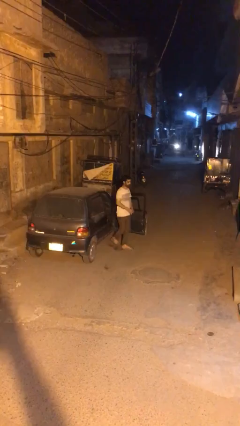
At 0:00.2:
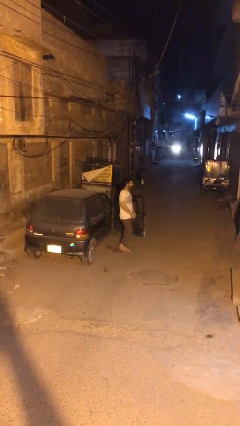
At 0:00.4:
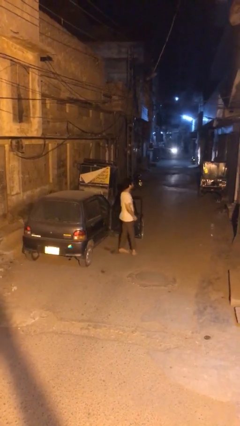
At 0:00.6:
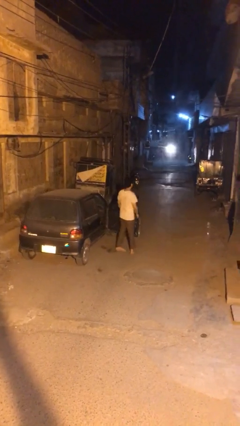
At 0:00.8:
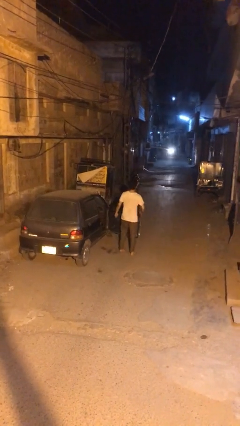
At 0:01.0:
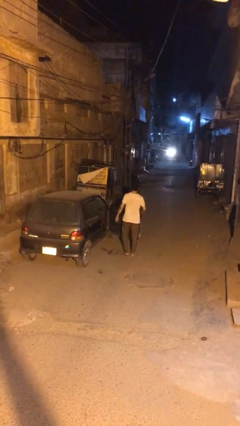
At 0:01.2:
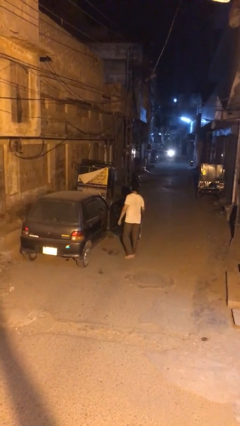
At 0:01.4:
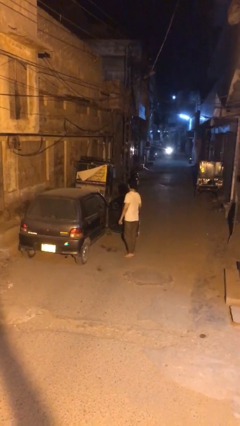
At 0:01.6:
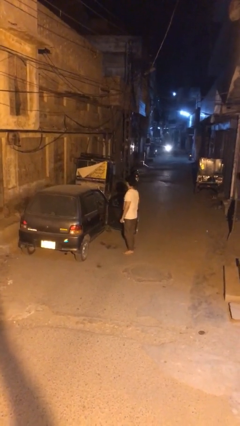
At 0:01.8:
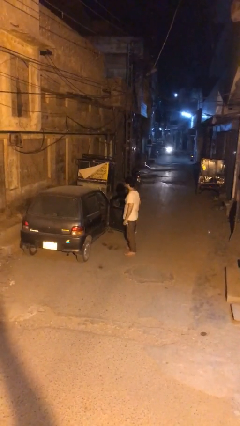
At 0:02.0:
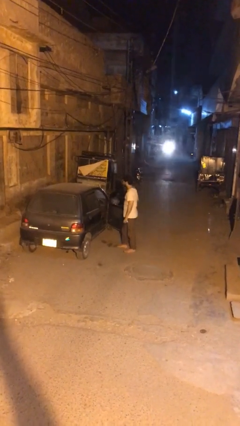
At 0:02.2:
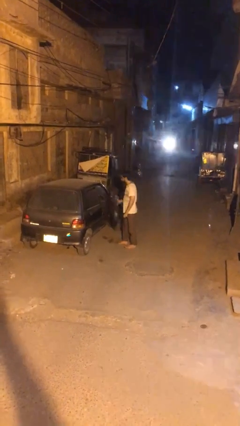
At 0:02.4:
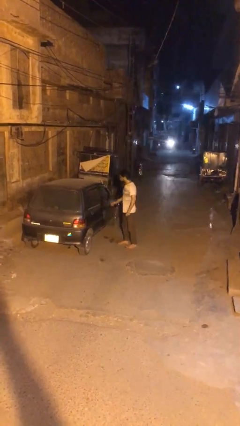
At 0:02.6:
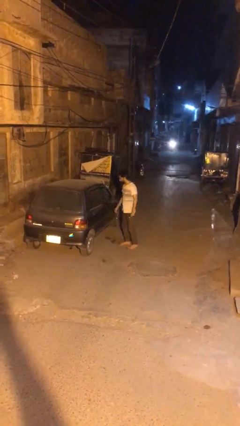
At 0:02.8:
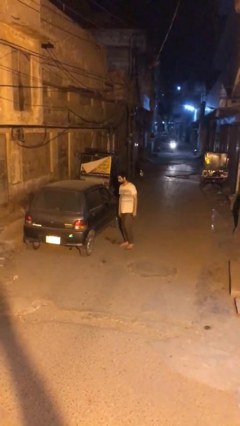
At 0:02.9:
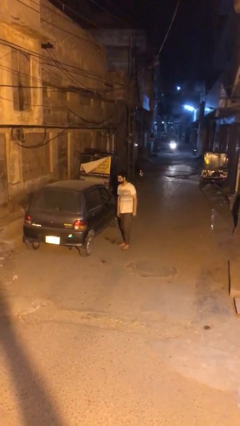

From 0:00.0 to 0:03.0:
person closes car door

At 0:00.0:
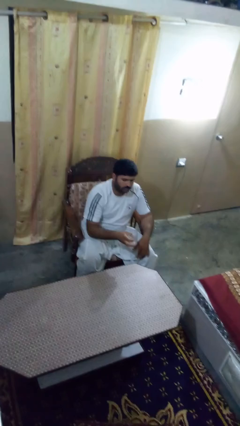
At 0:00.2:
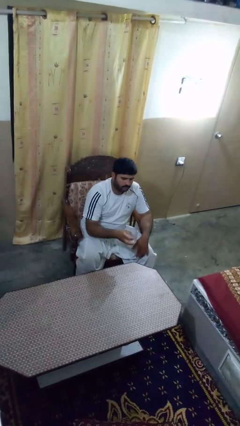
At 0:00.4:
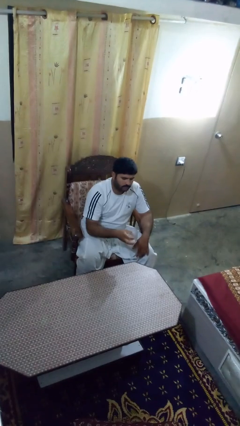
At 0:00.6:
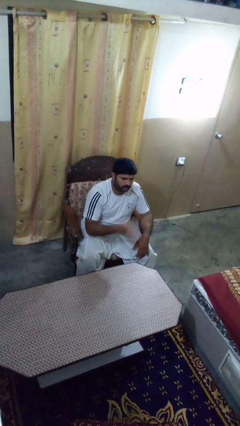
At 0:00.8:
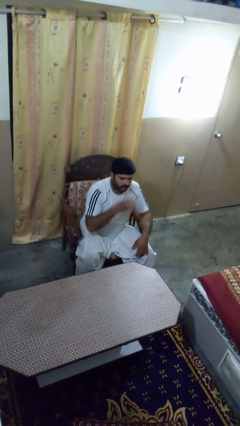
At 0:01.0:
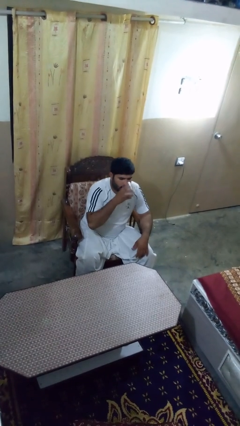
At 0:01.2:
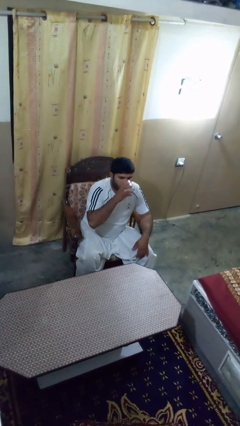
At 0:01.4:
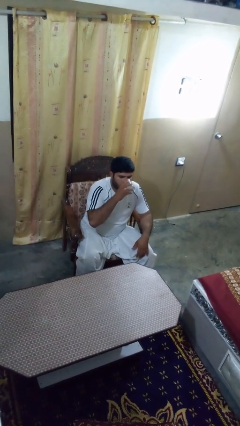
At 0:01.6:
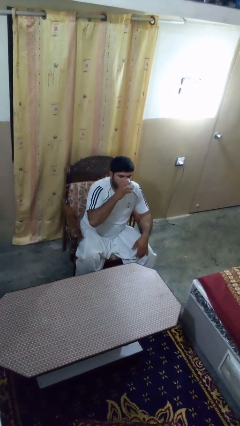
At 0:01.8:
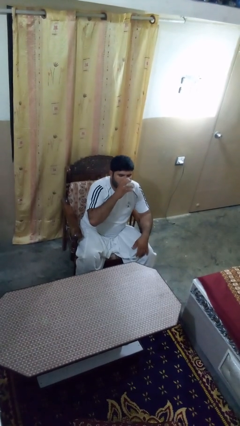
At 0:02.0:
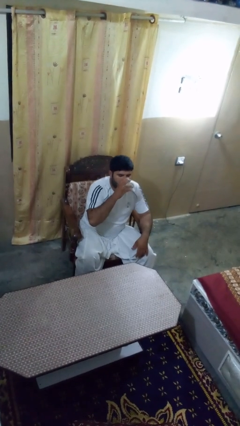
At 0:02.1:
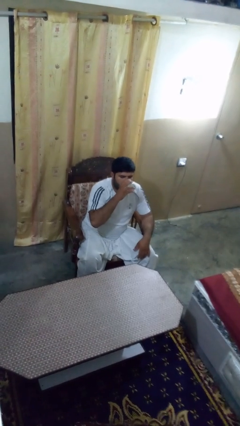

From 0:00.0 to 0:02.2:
person drinks from shotglass

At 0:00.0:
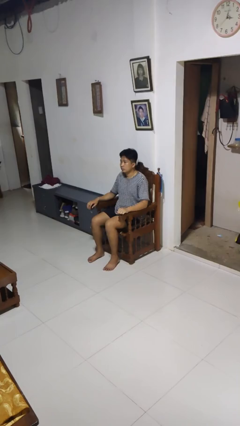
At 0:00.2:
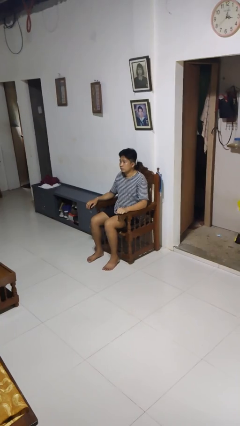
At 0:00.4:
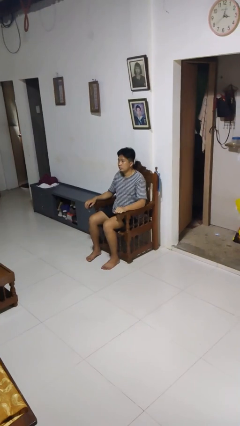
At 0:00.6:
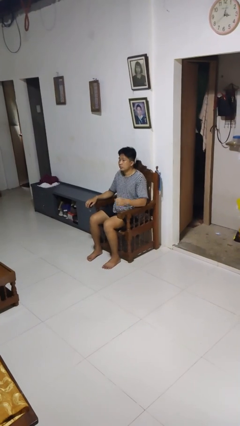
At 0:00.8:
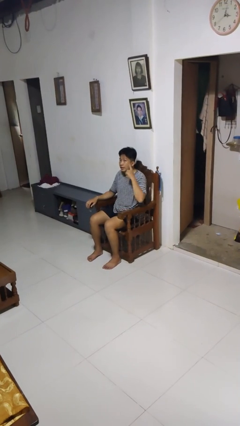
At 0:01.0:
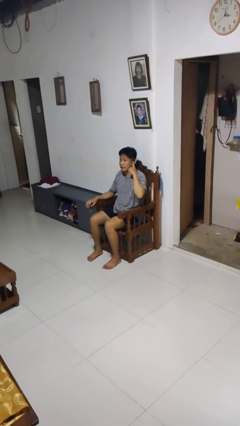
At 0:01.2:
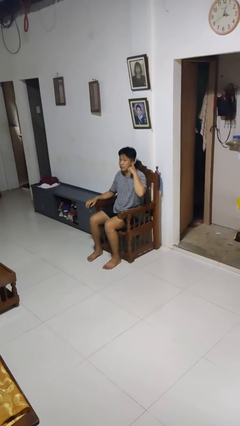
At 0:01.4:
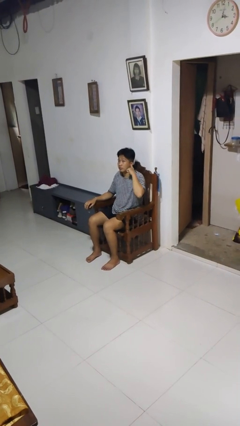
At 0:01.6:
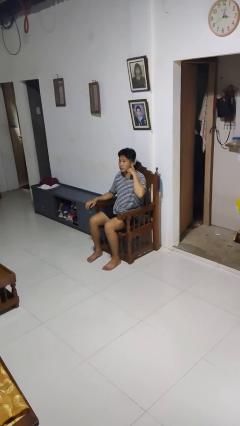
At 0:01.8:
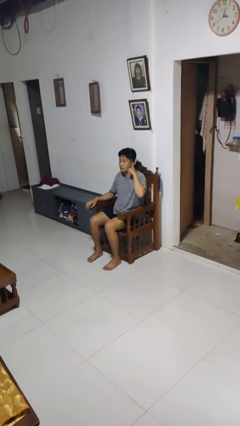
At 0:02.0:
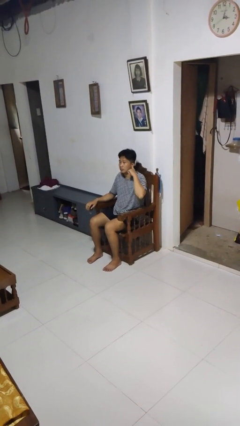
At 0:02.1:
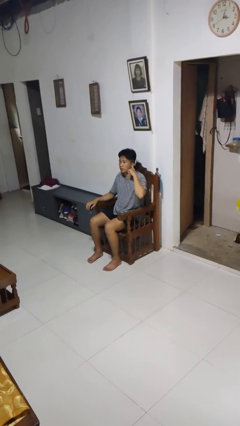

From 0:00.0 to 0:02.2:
person gestures listen closely

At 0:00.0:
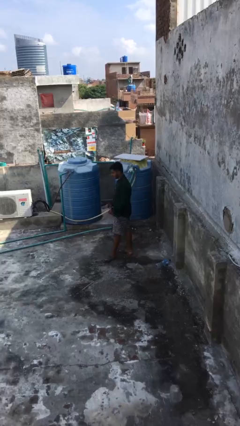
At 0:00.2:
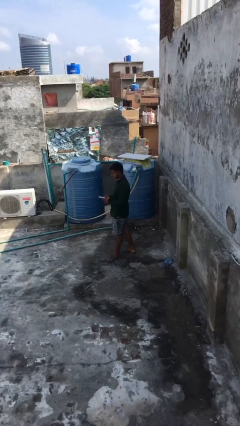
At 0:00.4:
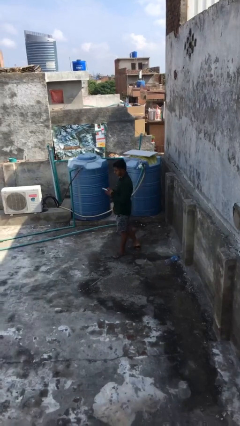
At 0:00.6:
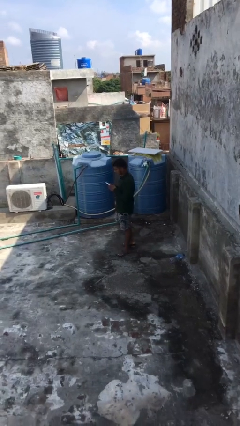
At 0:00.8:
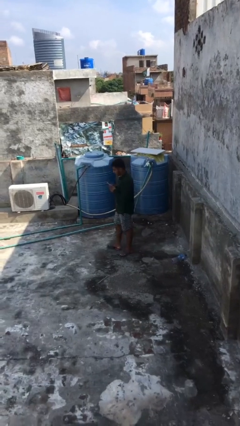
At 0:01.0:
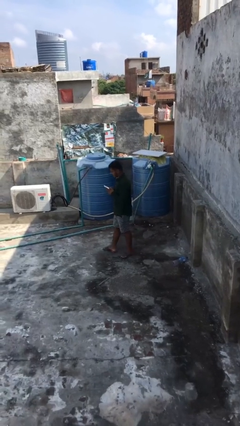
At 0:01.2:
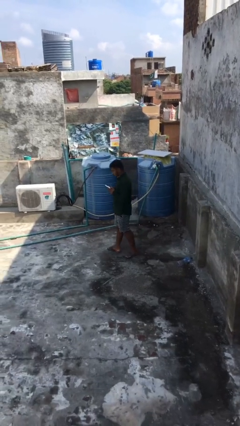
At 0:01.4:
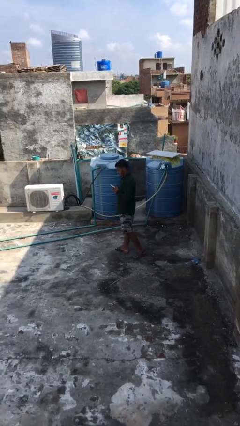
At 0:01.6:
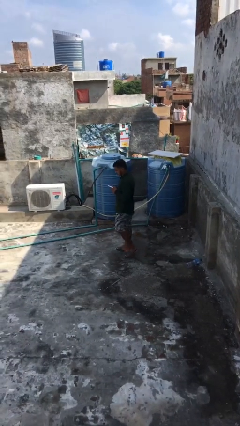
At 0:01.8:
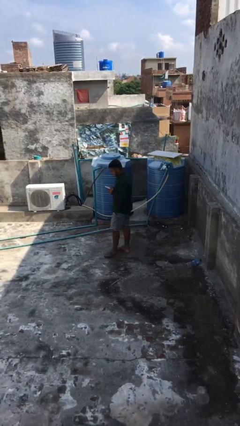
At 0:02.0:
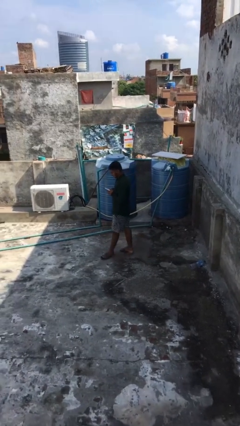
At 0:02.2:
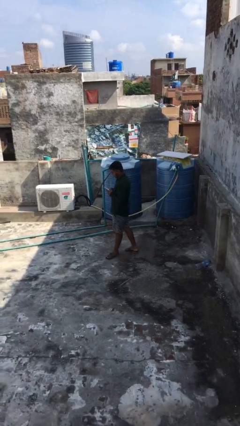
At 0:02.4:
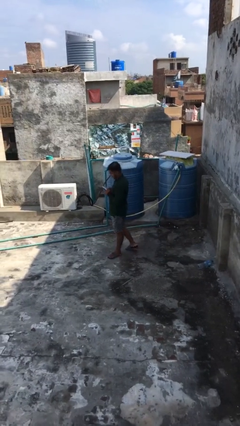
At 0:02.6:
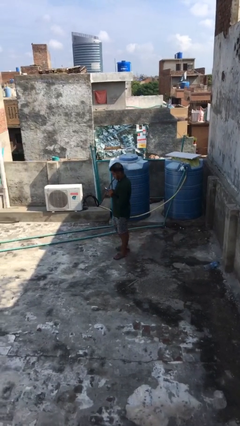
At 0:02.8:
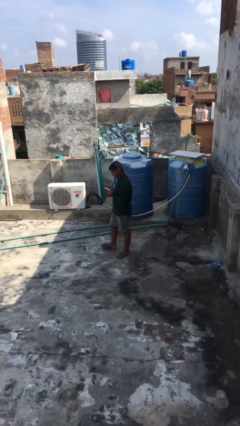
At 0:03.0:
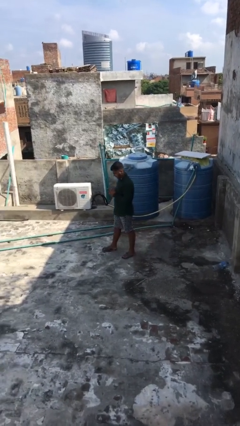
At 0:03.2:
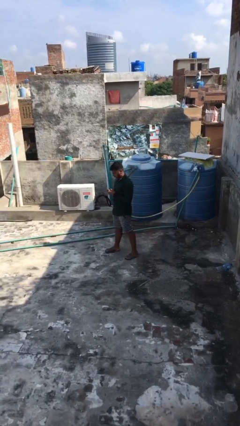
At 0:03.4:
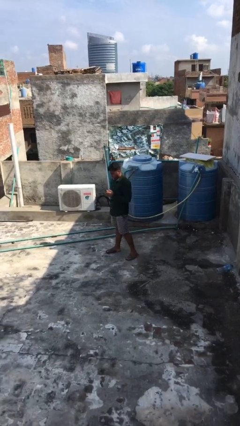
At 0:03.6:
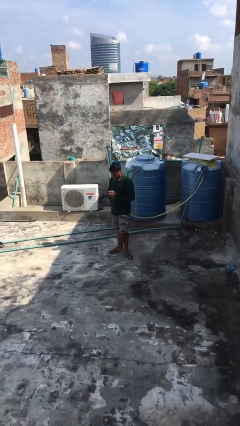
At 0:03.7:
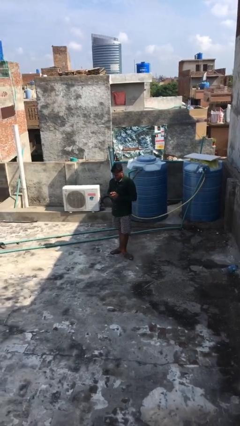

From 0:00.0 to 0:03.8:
person texts on phone

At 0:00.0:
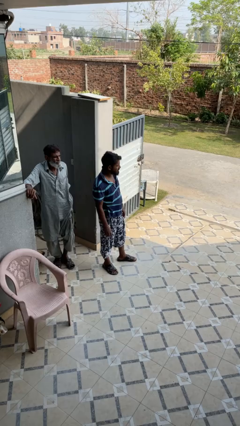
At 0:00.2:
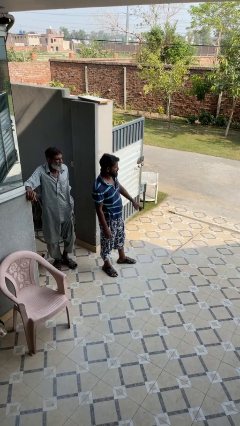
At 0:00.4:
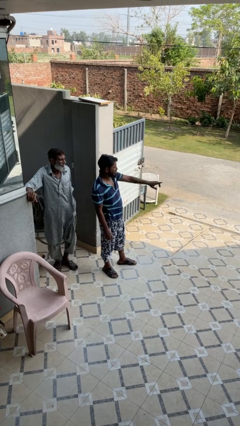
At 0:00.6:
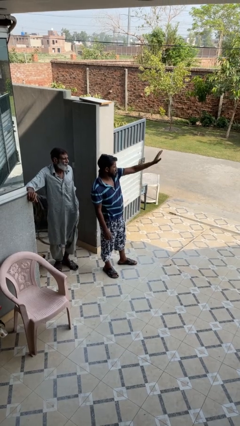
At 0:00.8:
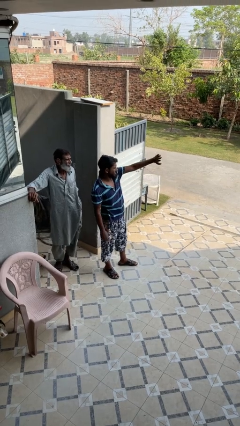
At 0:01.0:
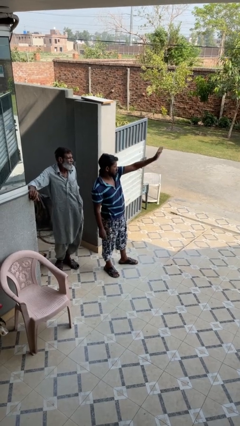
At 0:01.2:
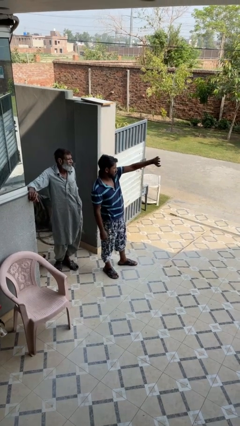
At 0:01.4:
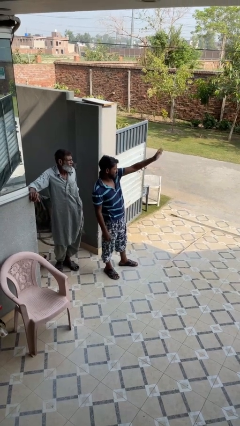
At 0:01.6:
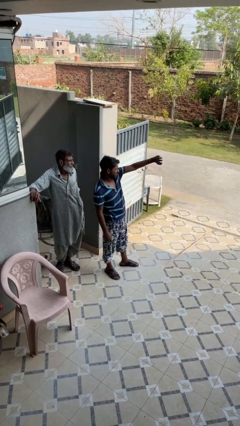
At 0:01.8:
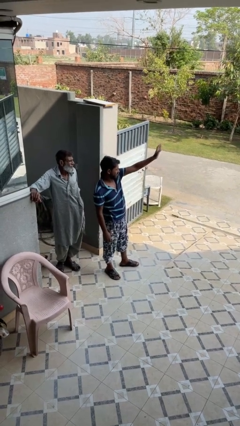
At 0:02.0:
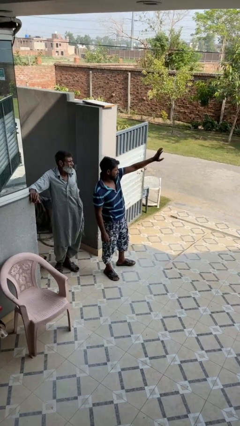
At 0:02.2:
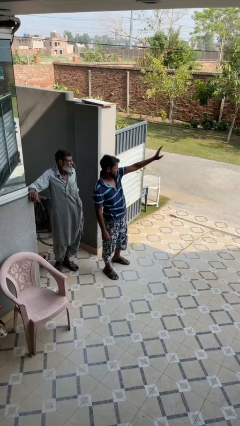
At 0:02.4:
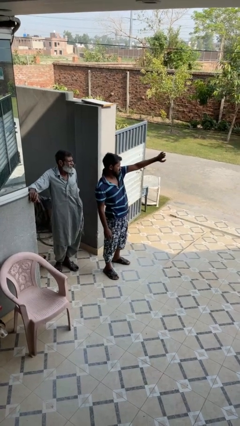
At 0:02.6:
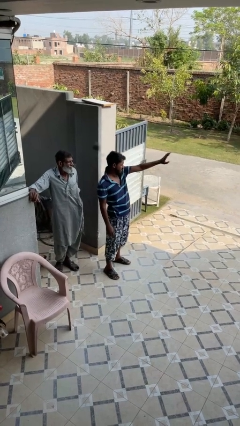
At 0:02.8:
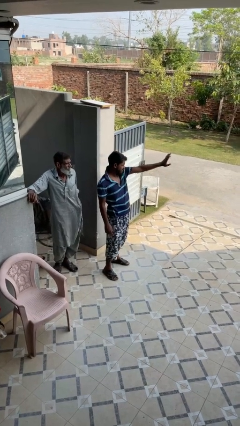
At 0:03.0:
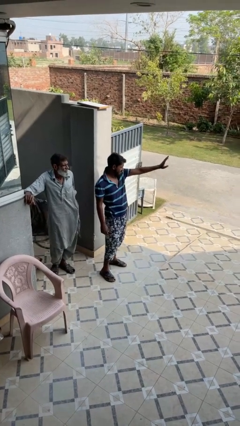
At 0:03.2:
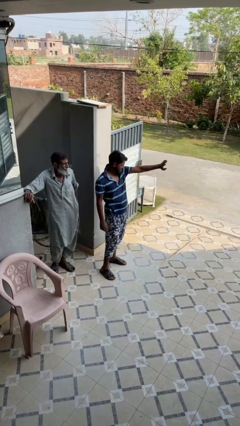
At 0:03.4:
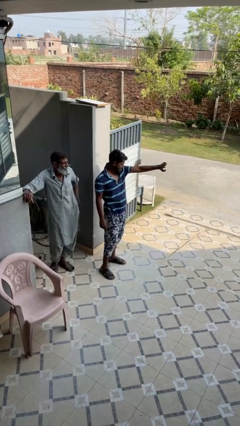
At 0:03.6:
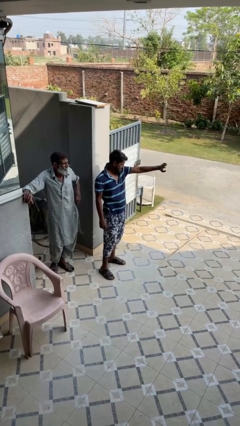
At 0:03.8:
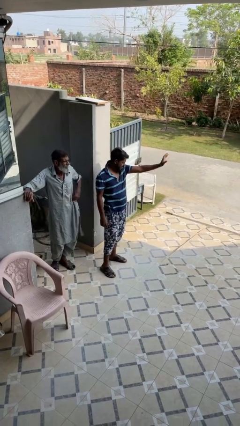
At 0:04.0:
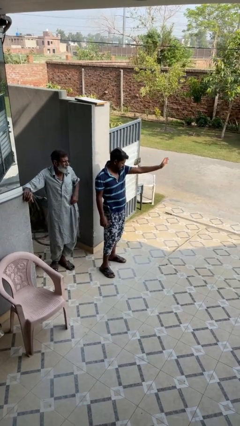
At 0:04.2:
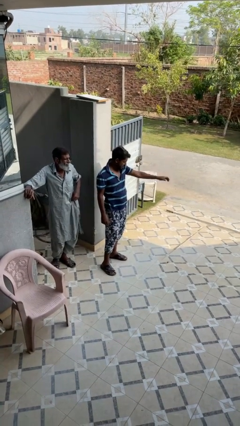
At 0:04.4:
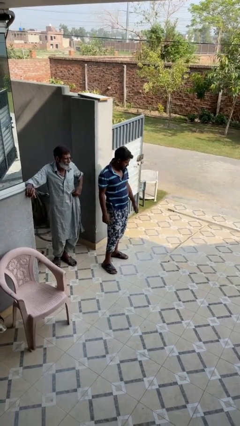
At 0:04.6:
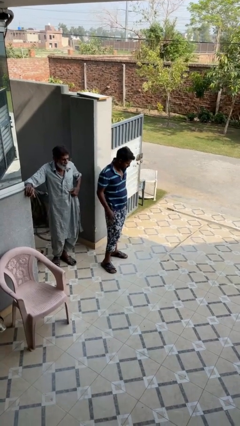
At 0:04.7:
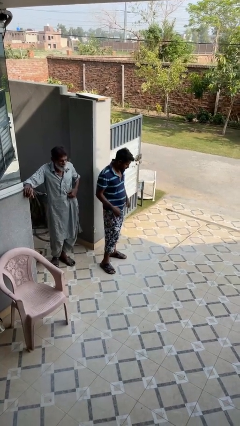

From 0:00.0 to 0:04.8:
person waves at person

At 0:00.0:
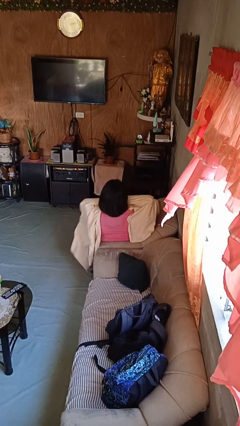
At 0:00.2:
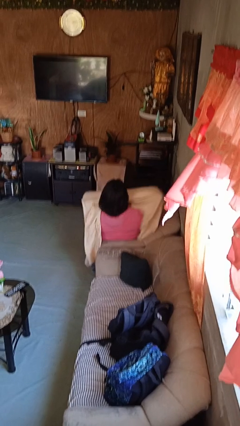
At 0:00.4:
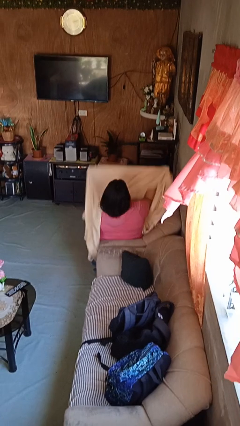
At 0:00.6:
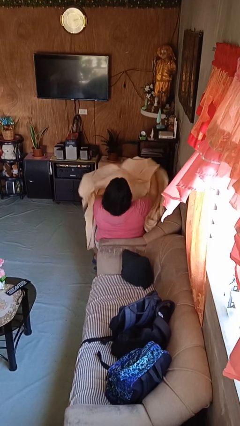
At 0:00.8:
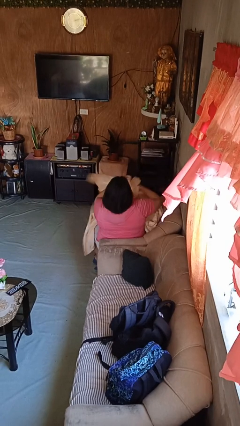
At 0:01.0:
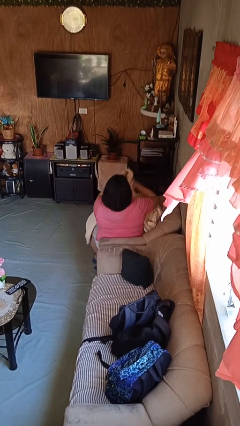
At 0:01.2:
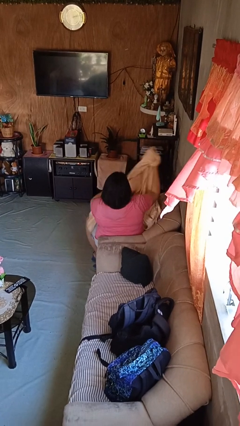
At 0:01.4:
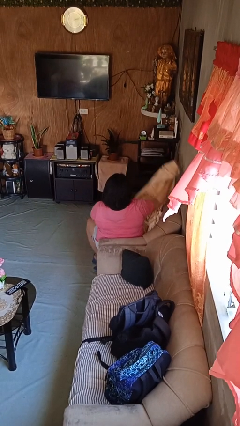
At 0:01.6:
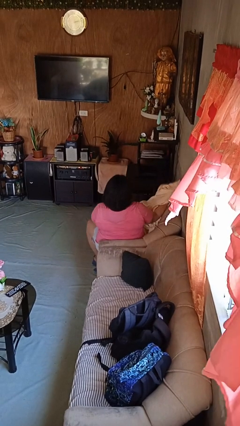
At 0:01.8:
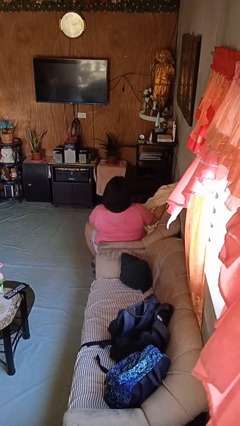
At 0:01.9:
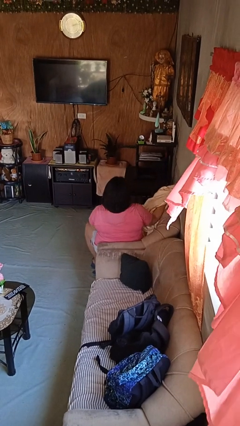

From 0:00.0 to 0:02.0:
person uncovers with blanket
